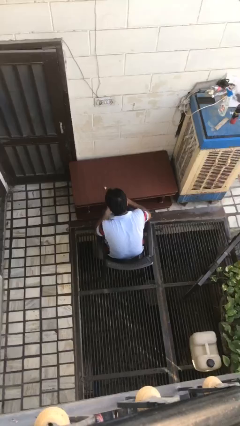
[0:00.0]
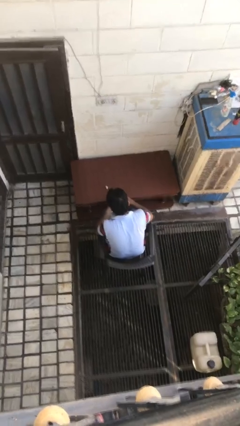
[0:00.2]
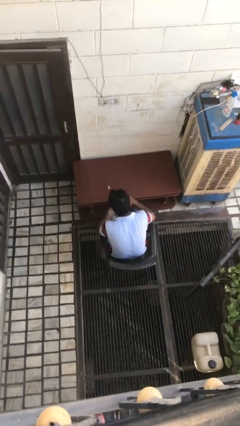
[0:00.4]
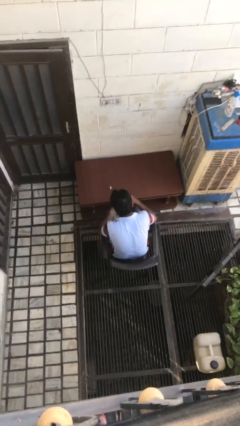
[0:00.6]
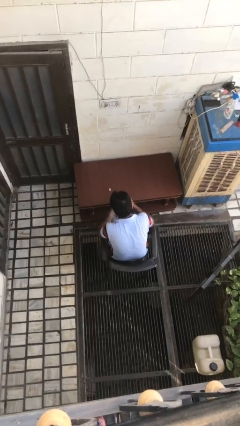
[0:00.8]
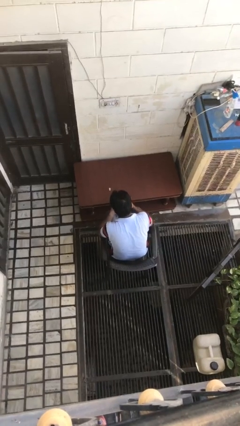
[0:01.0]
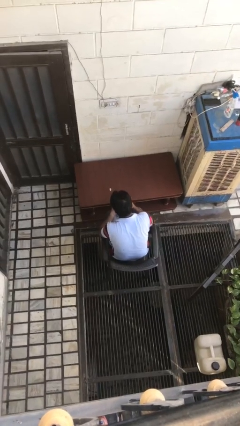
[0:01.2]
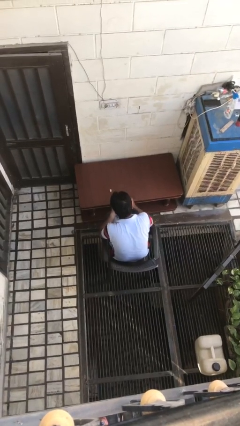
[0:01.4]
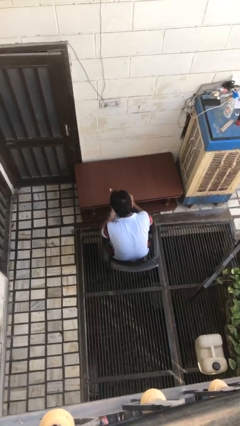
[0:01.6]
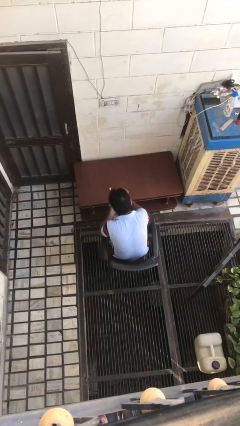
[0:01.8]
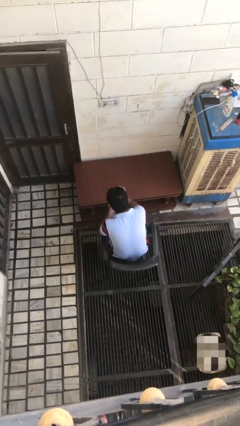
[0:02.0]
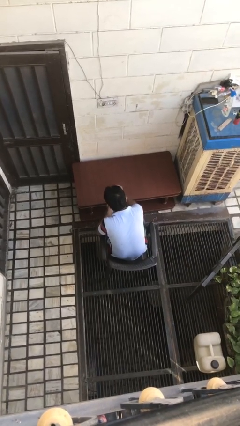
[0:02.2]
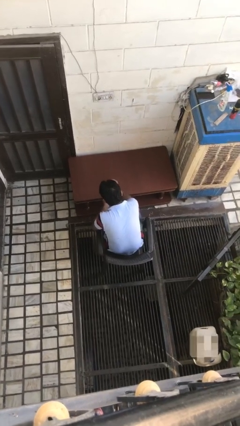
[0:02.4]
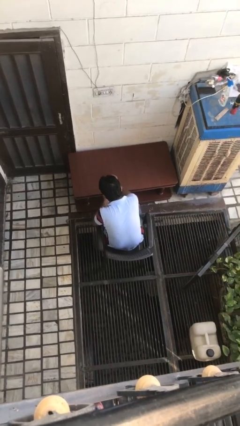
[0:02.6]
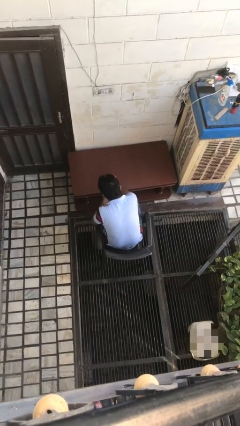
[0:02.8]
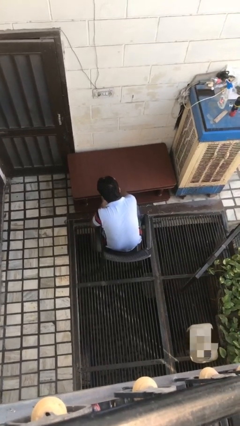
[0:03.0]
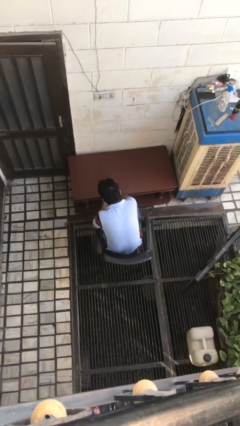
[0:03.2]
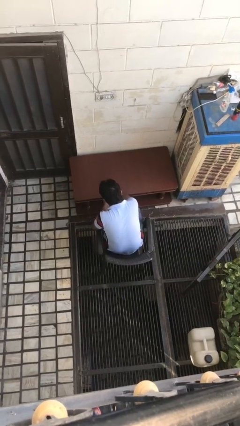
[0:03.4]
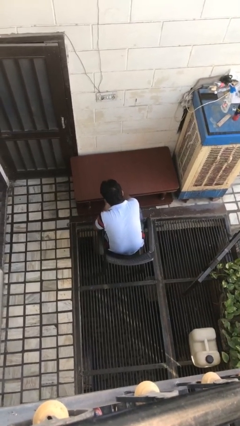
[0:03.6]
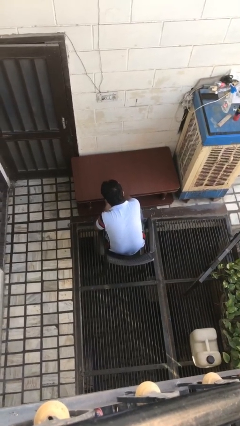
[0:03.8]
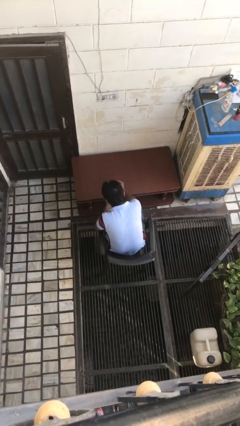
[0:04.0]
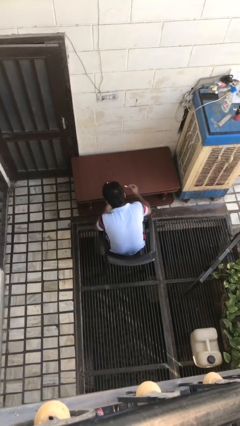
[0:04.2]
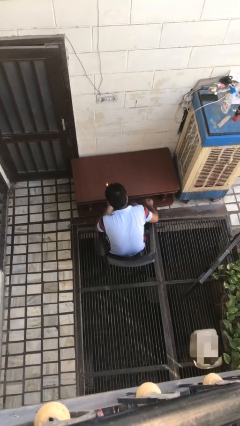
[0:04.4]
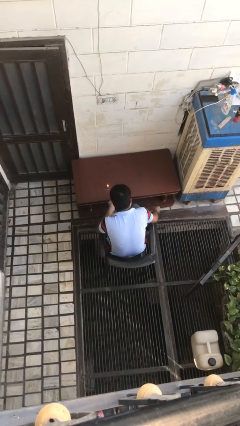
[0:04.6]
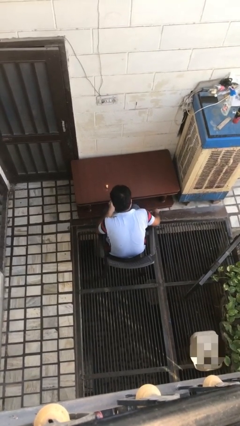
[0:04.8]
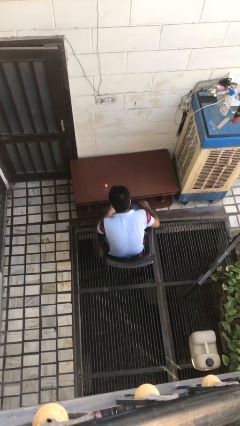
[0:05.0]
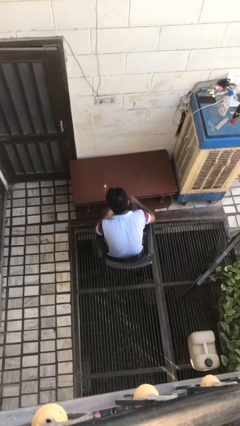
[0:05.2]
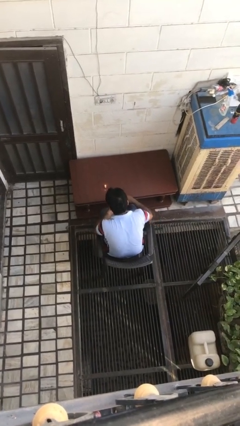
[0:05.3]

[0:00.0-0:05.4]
person lights candle

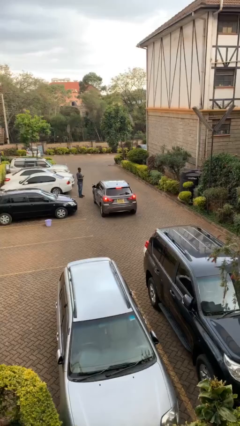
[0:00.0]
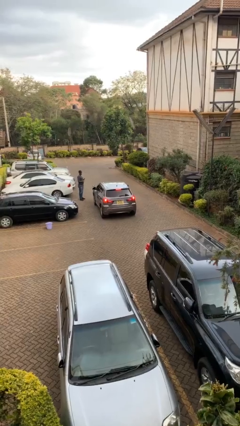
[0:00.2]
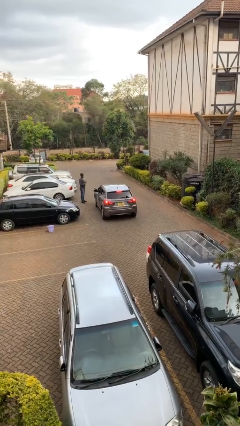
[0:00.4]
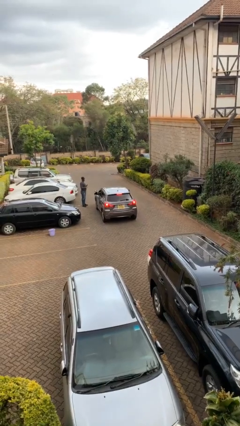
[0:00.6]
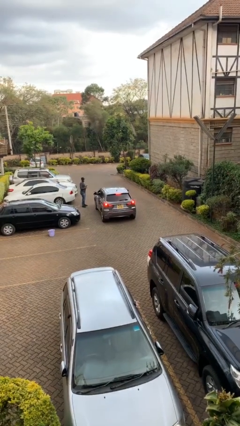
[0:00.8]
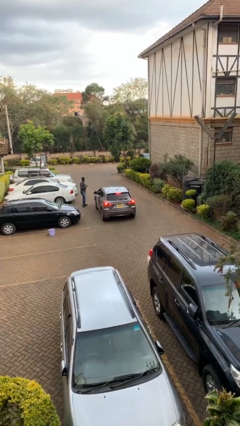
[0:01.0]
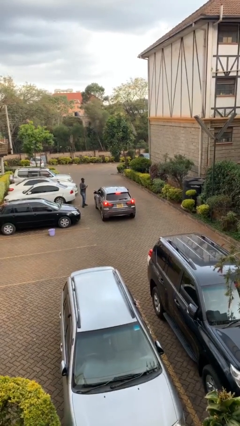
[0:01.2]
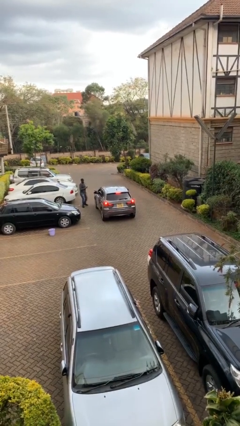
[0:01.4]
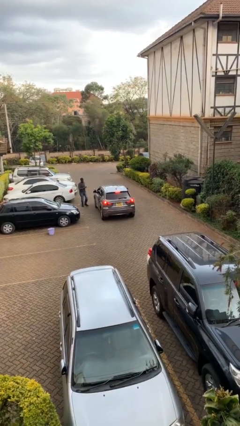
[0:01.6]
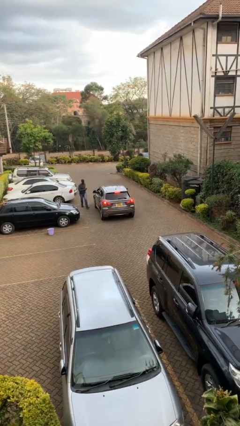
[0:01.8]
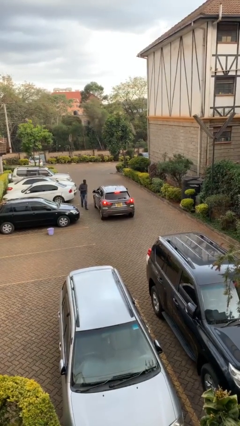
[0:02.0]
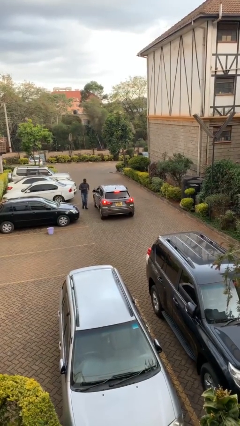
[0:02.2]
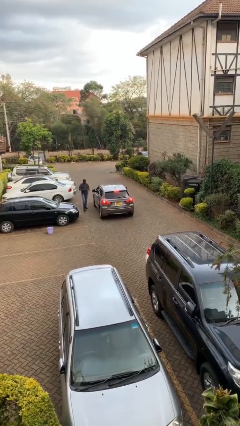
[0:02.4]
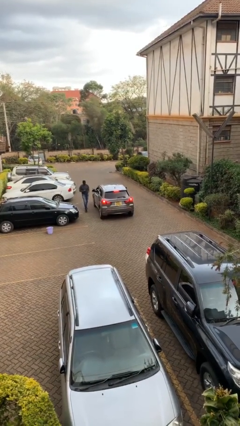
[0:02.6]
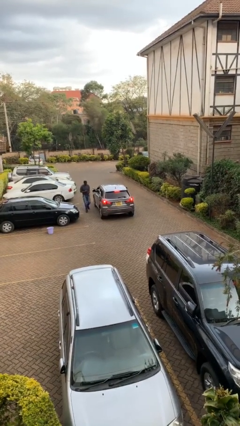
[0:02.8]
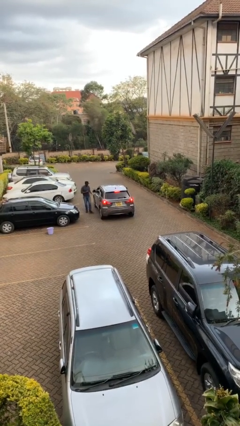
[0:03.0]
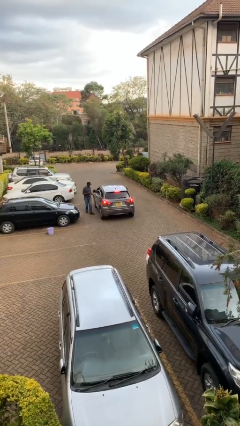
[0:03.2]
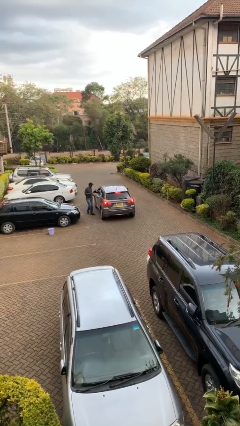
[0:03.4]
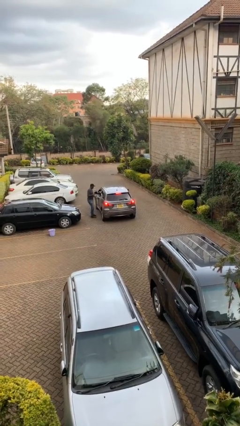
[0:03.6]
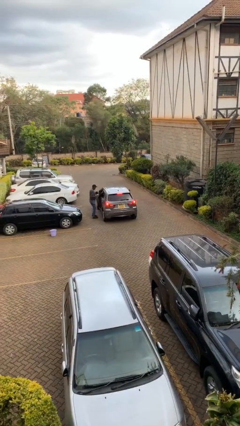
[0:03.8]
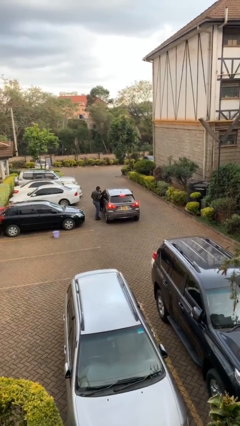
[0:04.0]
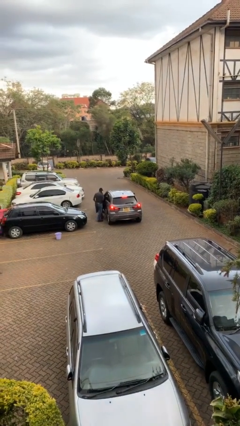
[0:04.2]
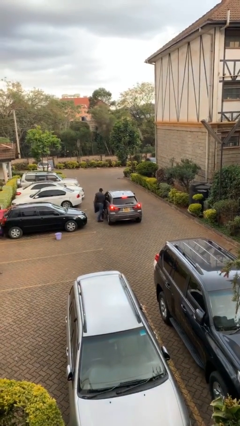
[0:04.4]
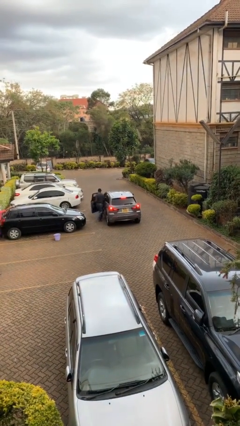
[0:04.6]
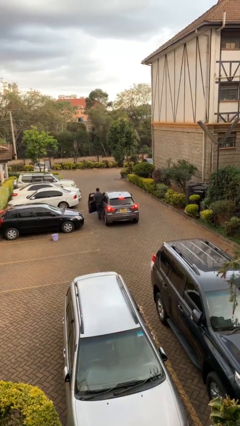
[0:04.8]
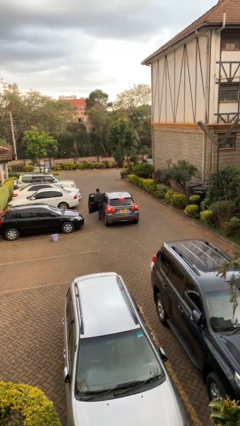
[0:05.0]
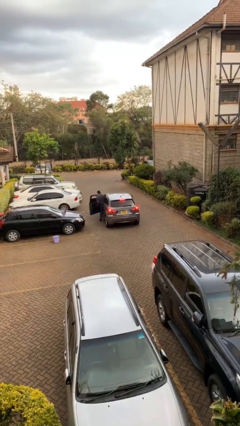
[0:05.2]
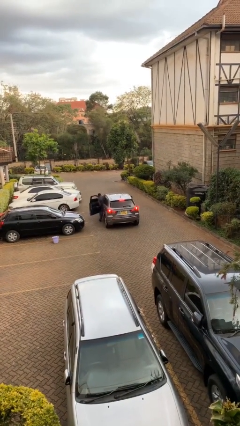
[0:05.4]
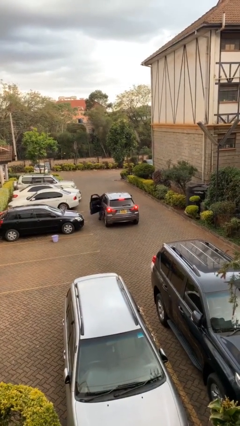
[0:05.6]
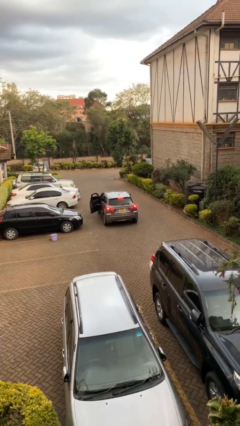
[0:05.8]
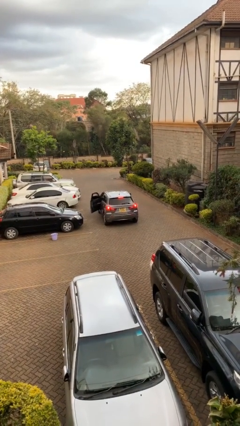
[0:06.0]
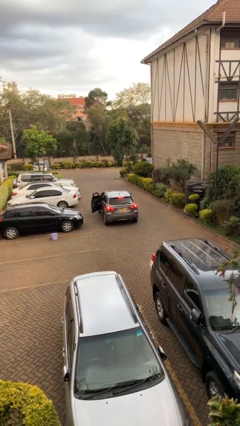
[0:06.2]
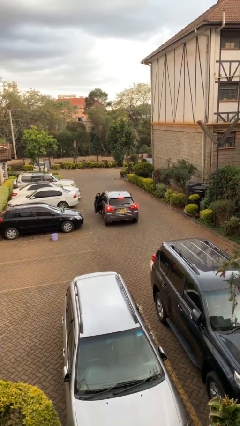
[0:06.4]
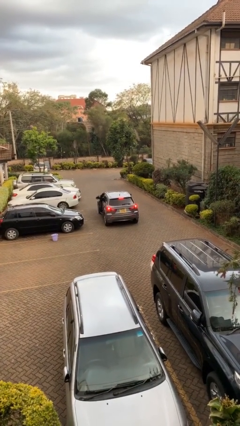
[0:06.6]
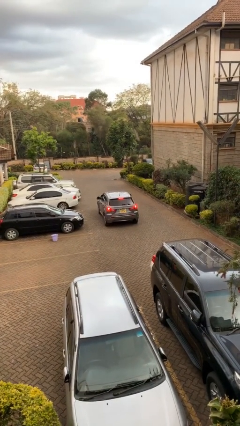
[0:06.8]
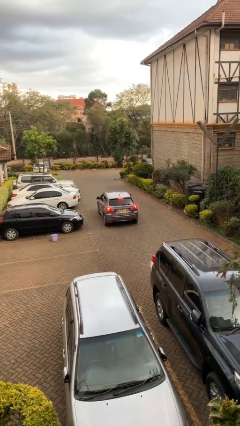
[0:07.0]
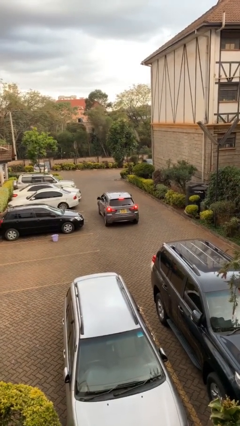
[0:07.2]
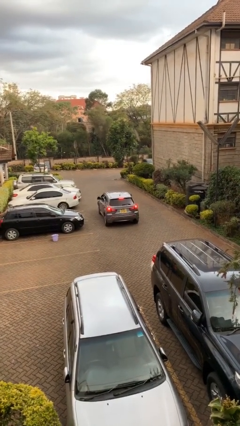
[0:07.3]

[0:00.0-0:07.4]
car picks up person

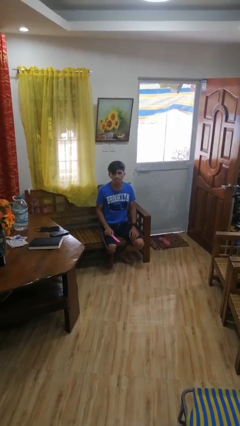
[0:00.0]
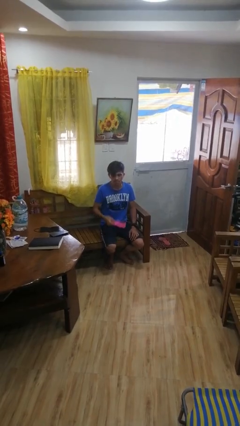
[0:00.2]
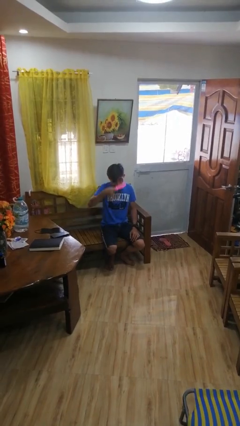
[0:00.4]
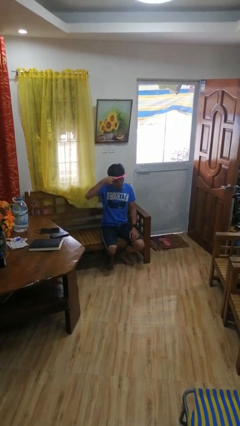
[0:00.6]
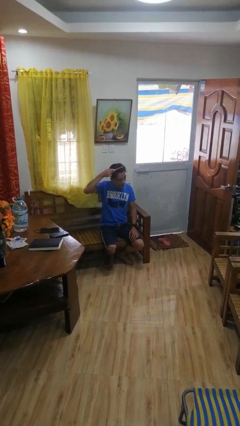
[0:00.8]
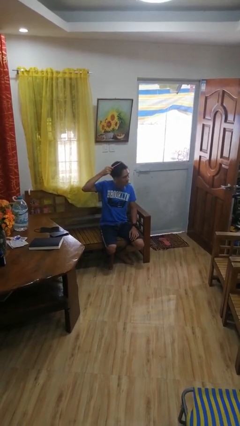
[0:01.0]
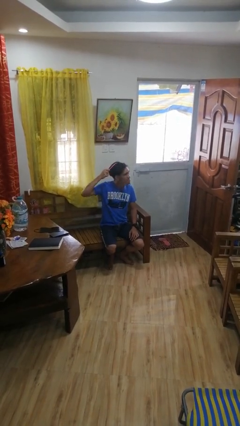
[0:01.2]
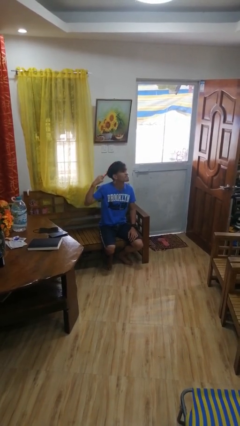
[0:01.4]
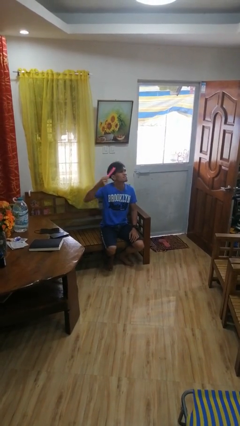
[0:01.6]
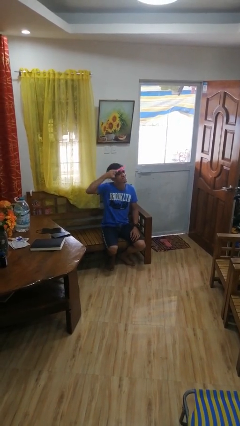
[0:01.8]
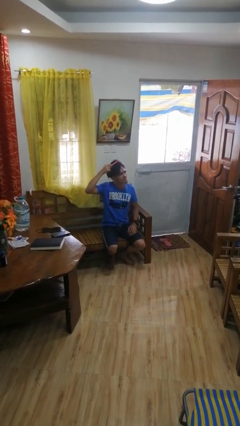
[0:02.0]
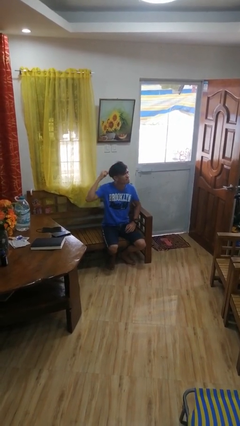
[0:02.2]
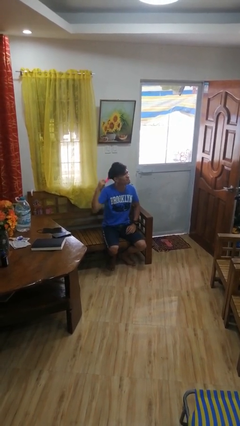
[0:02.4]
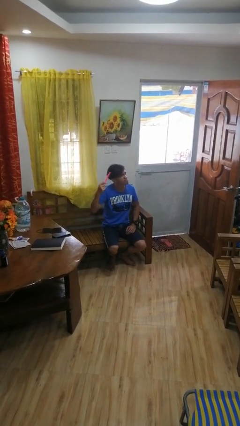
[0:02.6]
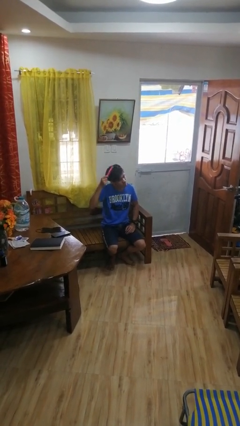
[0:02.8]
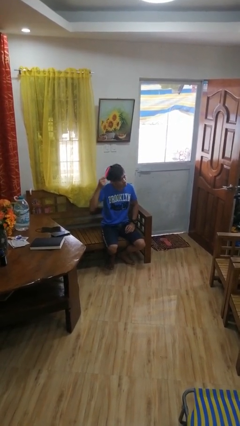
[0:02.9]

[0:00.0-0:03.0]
person brushes hair

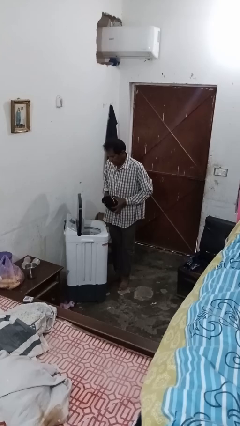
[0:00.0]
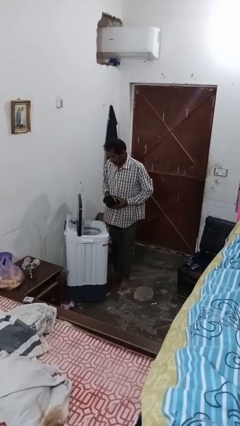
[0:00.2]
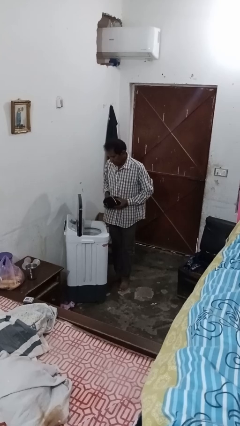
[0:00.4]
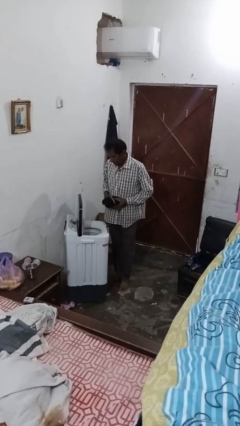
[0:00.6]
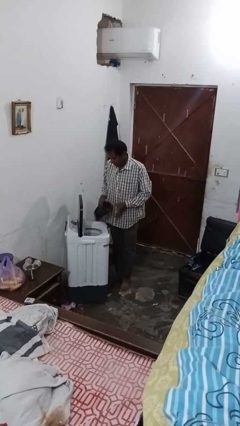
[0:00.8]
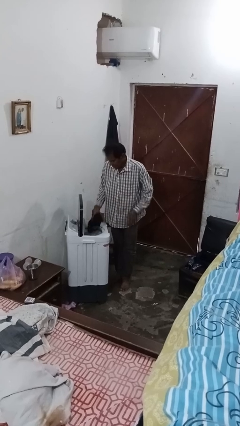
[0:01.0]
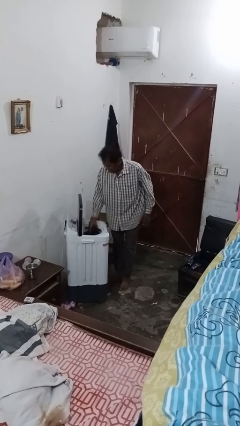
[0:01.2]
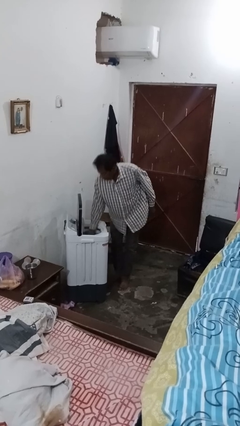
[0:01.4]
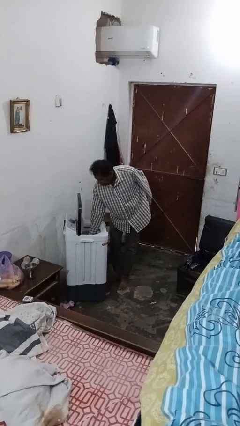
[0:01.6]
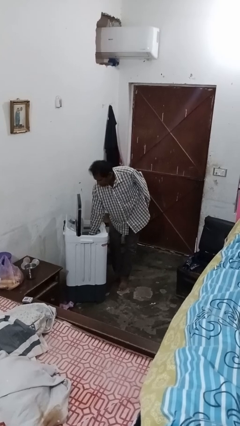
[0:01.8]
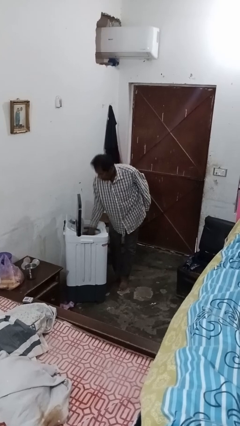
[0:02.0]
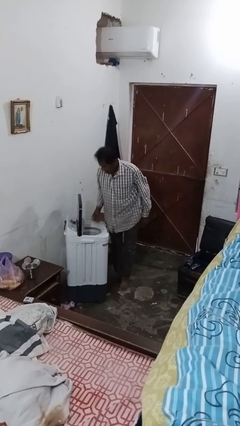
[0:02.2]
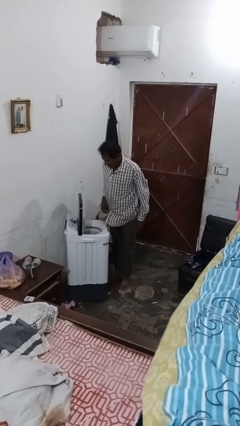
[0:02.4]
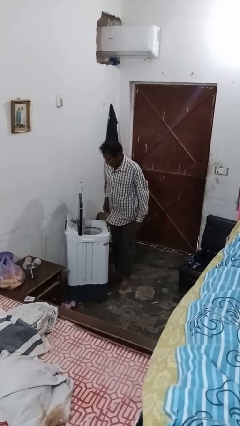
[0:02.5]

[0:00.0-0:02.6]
person loads clotheswasher
